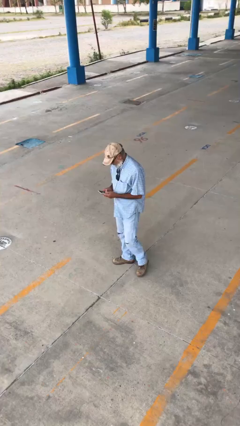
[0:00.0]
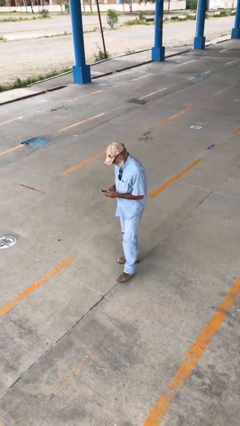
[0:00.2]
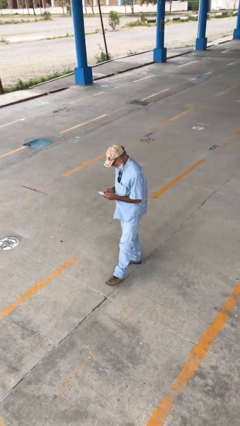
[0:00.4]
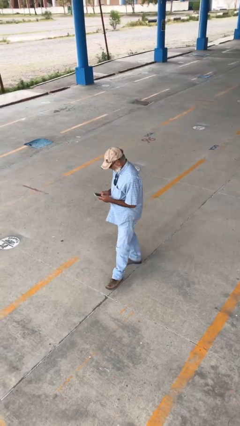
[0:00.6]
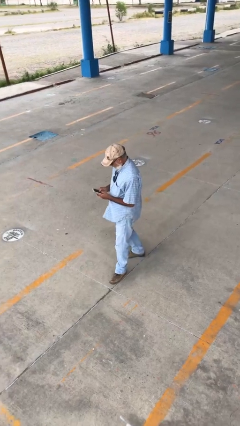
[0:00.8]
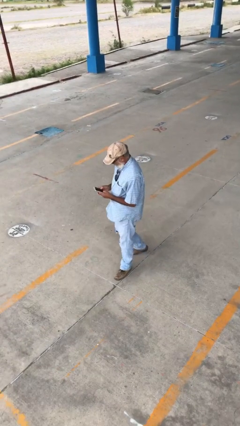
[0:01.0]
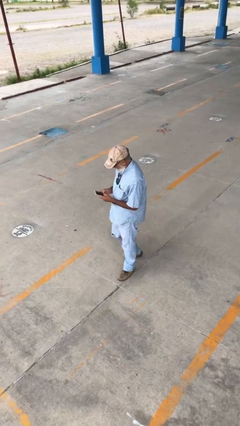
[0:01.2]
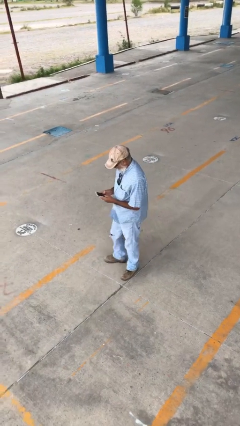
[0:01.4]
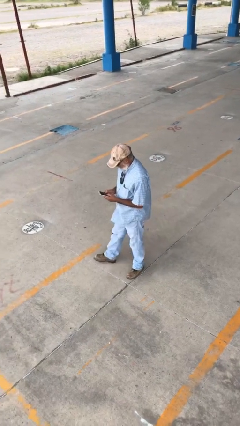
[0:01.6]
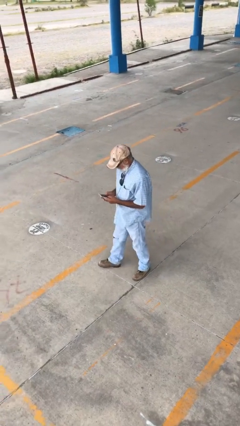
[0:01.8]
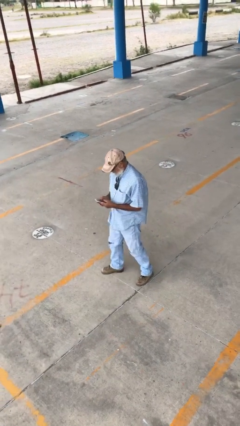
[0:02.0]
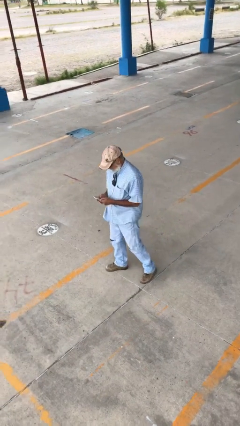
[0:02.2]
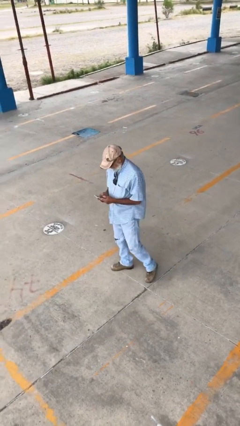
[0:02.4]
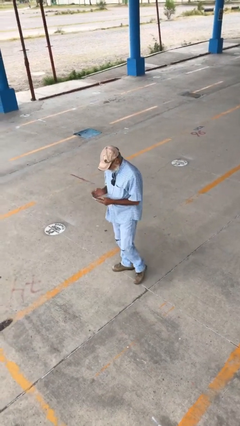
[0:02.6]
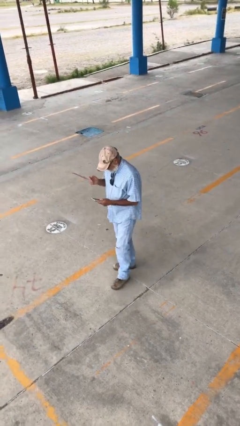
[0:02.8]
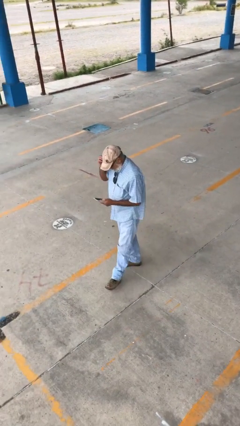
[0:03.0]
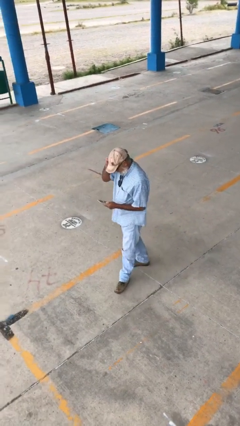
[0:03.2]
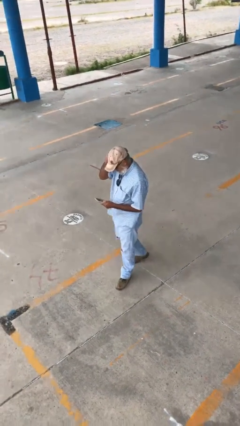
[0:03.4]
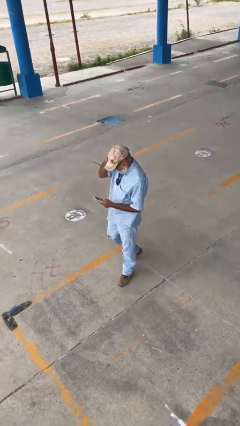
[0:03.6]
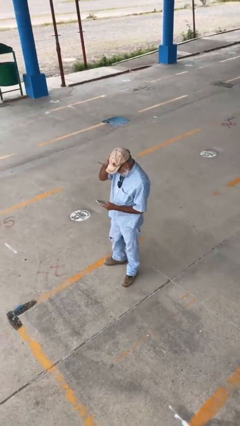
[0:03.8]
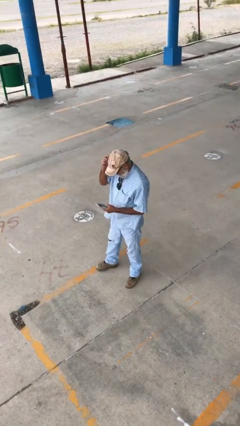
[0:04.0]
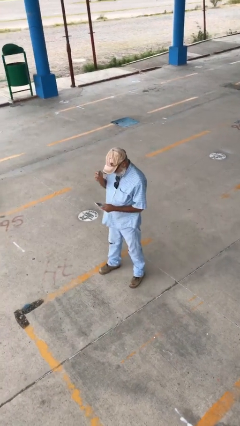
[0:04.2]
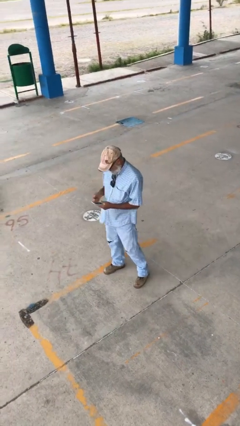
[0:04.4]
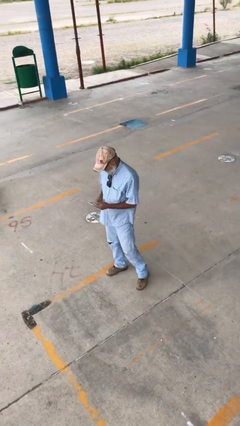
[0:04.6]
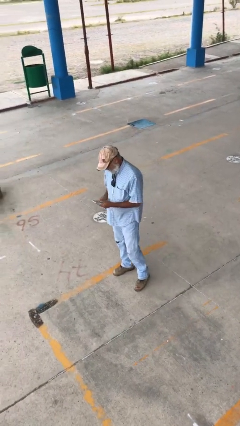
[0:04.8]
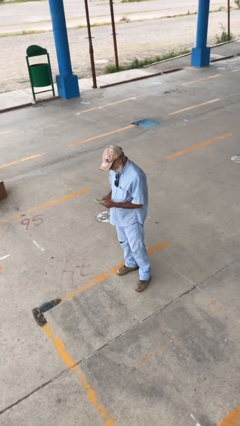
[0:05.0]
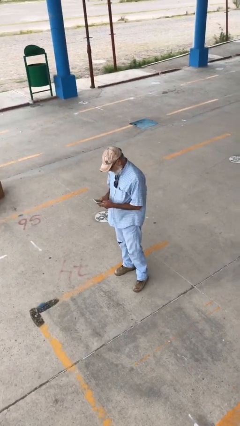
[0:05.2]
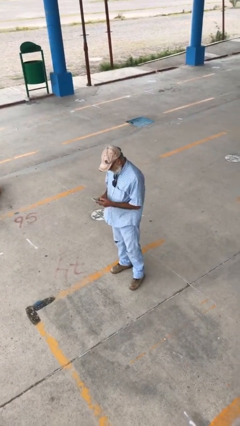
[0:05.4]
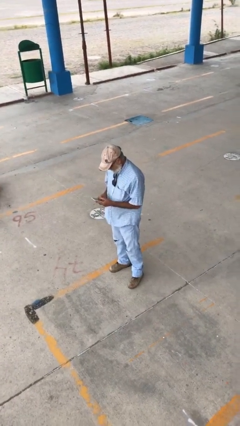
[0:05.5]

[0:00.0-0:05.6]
person texts on phone

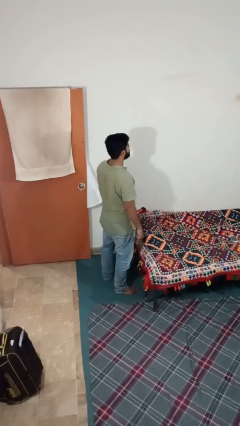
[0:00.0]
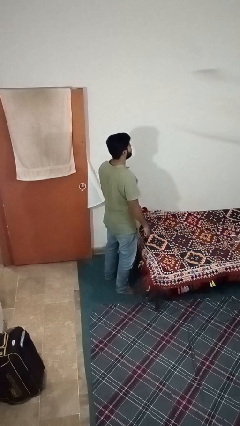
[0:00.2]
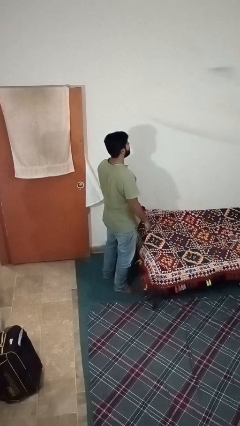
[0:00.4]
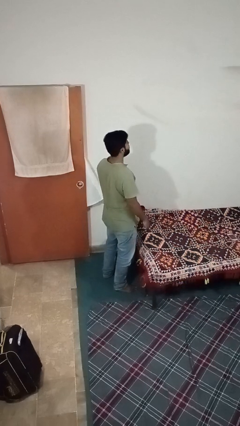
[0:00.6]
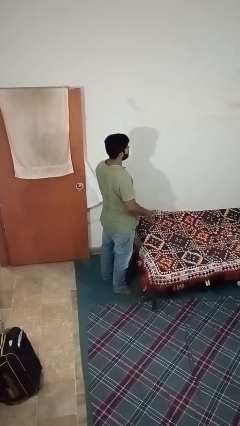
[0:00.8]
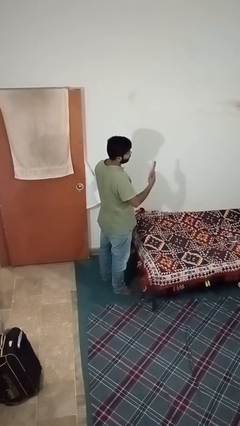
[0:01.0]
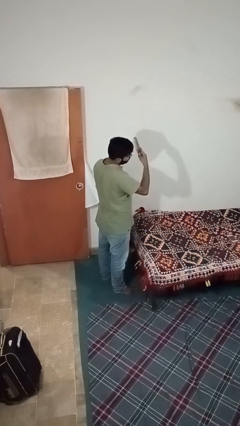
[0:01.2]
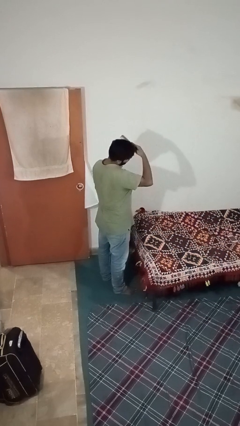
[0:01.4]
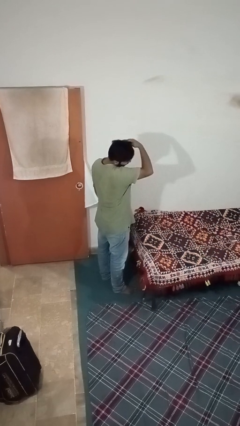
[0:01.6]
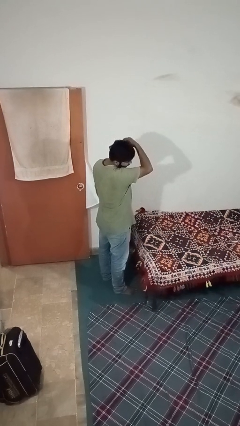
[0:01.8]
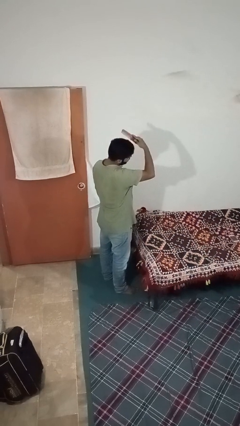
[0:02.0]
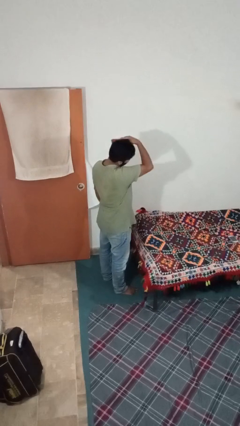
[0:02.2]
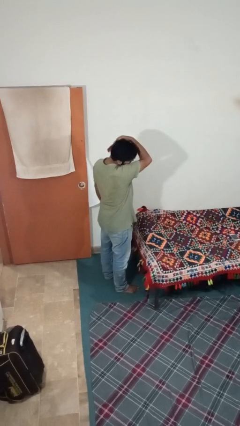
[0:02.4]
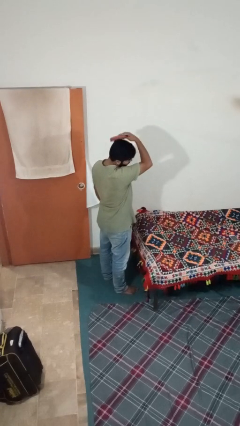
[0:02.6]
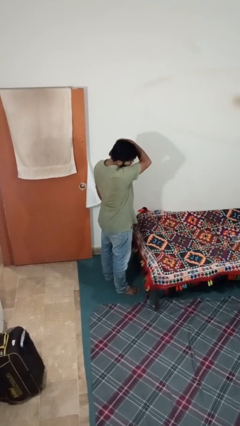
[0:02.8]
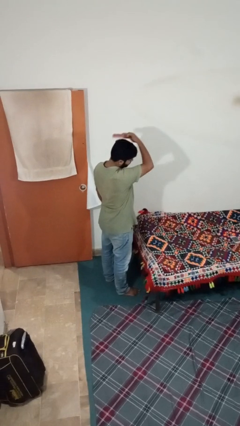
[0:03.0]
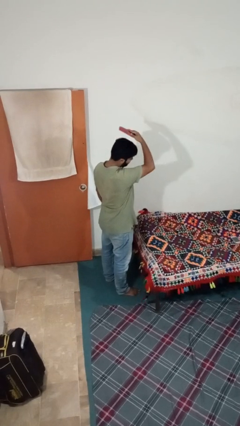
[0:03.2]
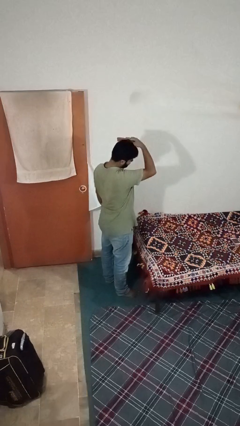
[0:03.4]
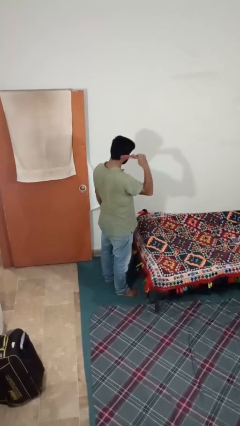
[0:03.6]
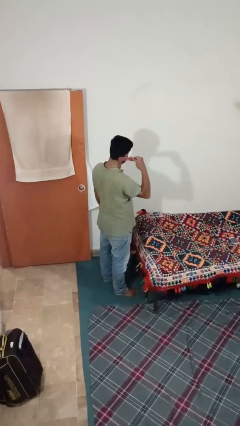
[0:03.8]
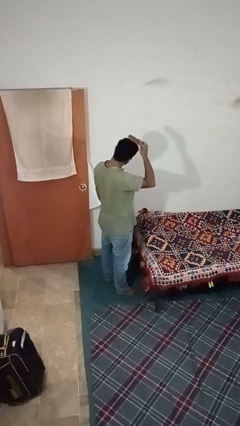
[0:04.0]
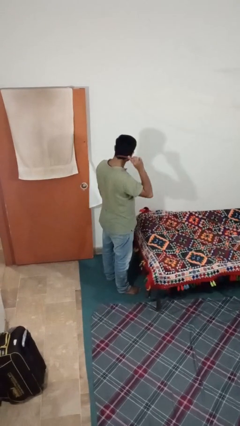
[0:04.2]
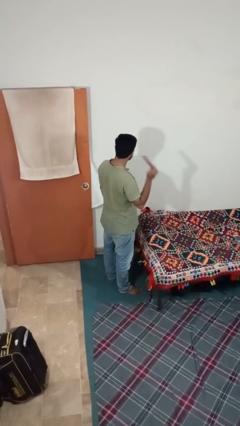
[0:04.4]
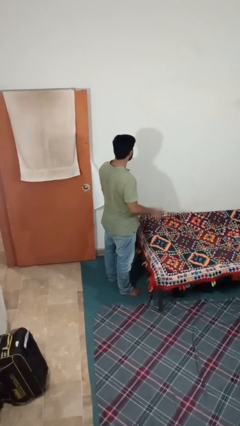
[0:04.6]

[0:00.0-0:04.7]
person brushes hair

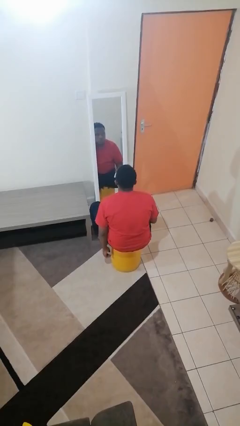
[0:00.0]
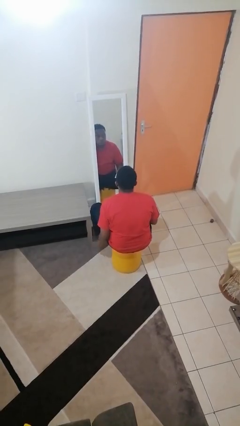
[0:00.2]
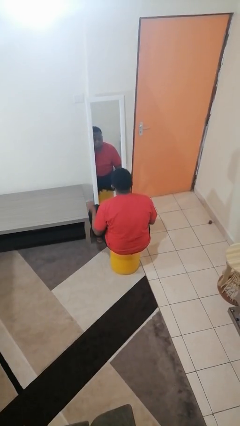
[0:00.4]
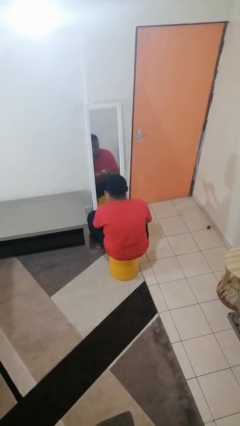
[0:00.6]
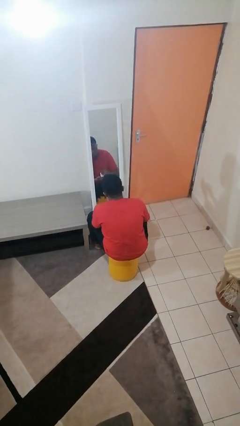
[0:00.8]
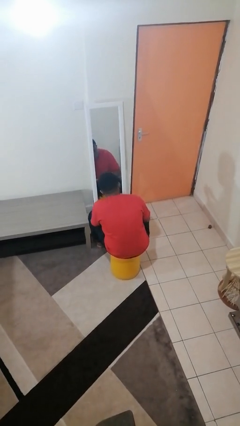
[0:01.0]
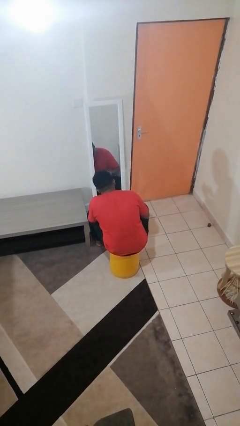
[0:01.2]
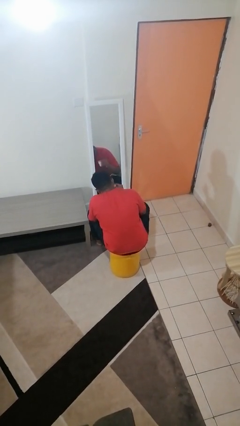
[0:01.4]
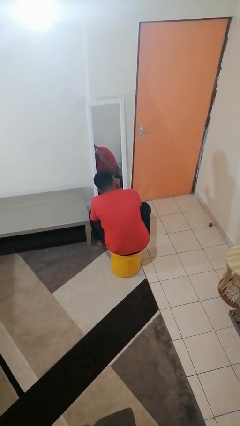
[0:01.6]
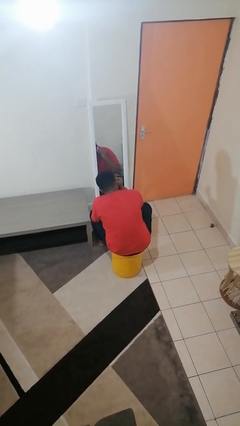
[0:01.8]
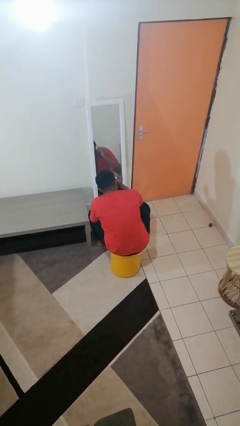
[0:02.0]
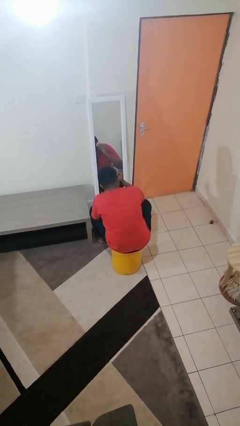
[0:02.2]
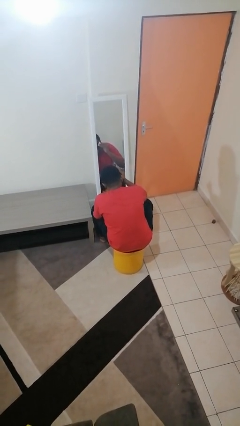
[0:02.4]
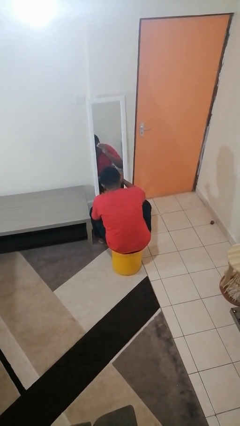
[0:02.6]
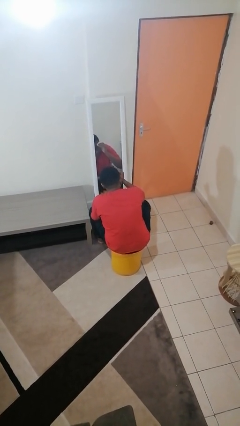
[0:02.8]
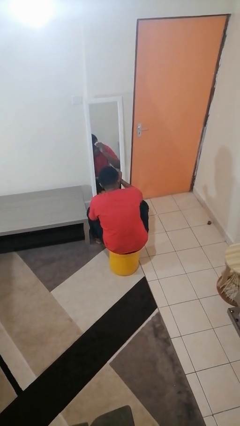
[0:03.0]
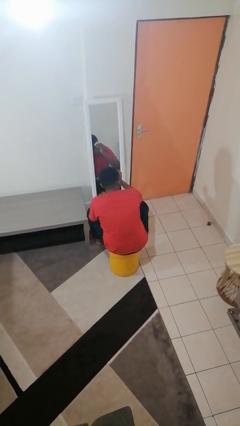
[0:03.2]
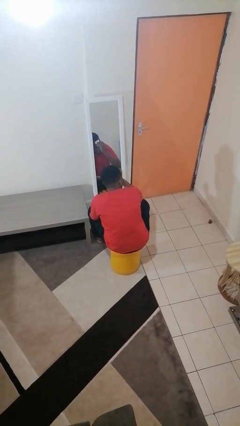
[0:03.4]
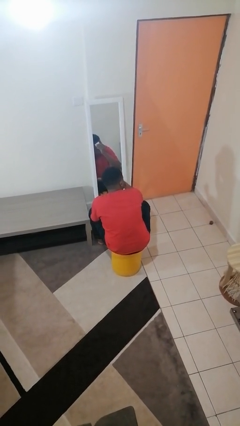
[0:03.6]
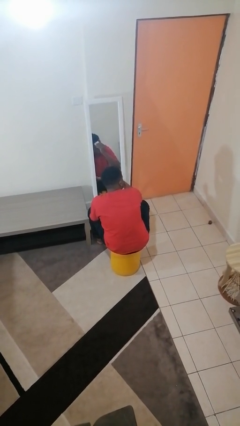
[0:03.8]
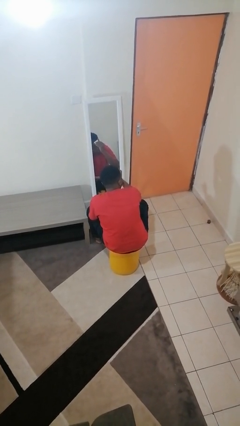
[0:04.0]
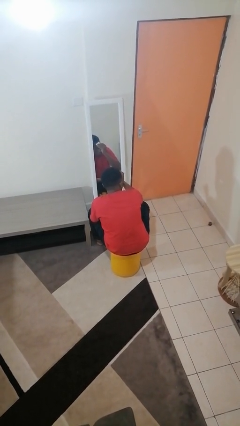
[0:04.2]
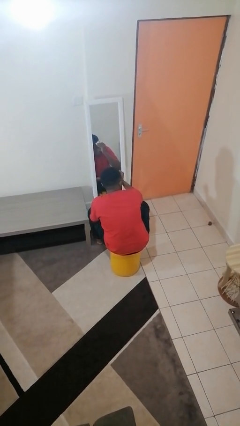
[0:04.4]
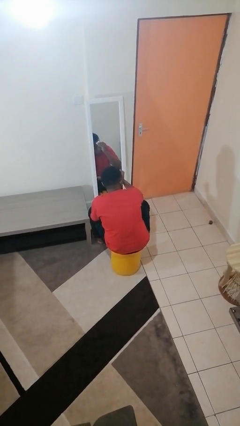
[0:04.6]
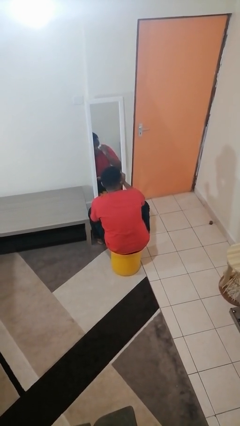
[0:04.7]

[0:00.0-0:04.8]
person applies foundation makeup

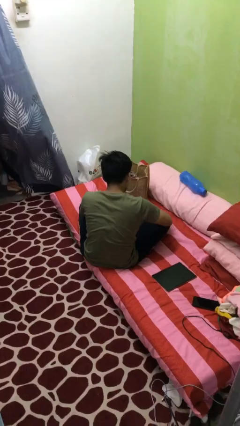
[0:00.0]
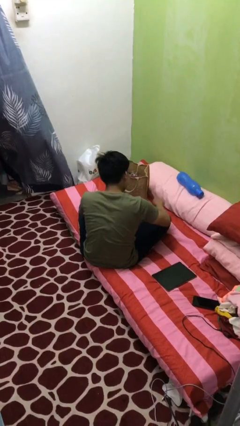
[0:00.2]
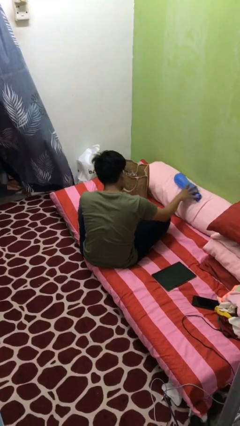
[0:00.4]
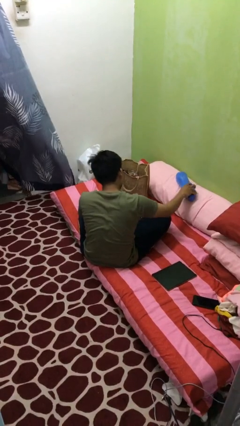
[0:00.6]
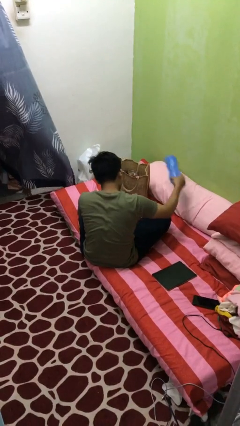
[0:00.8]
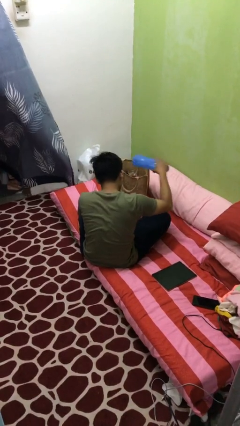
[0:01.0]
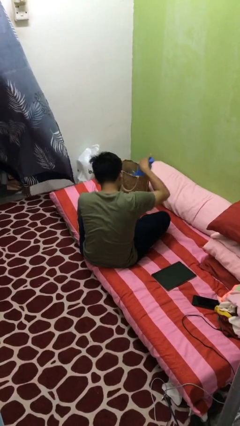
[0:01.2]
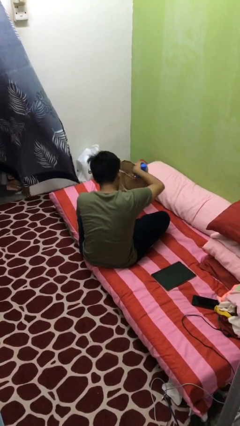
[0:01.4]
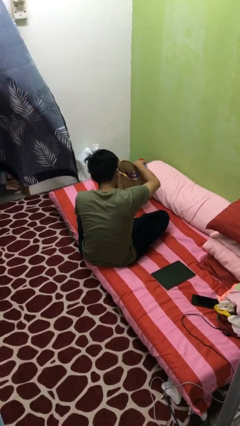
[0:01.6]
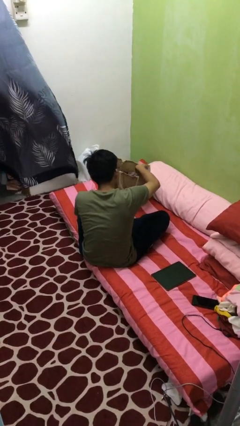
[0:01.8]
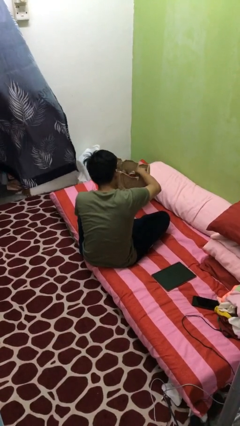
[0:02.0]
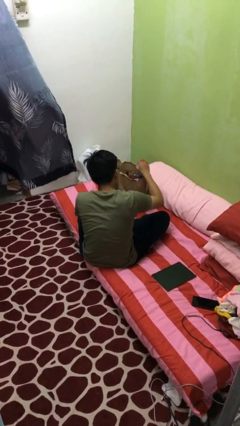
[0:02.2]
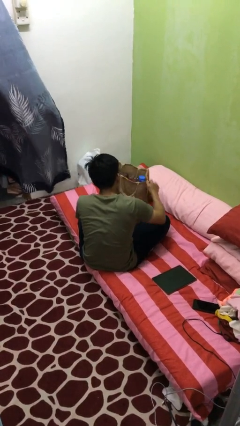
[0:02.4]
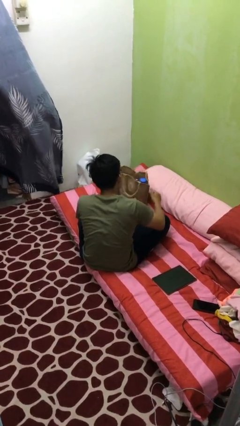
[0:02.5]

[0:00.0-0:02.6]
person puts object into bag

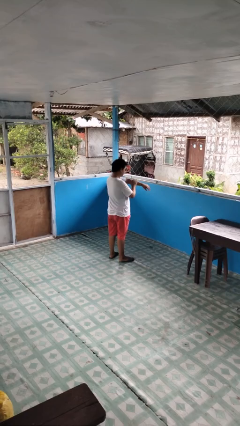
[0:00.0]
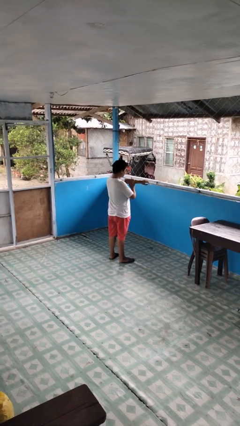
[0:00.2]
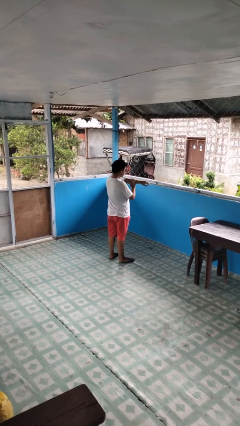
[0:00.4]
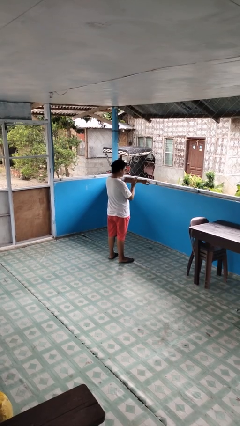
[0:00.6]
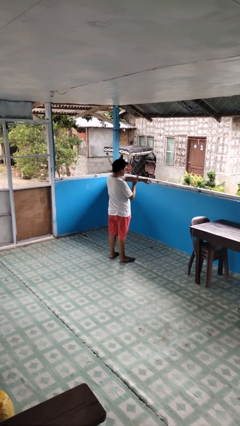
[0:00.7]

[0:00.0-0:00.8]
person swats bug
